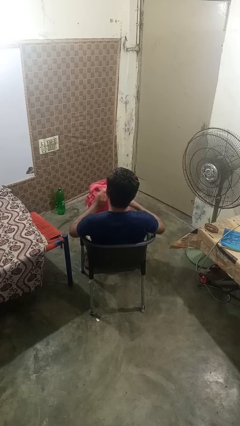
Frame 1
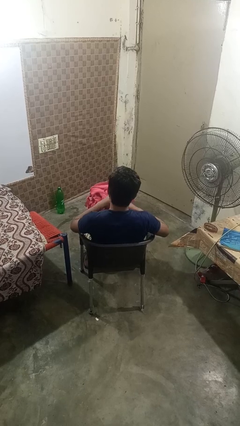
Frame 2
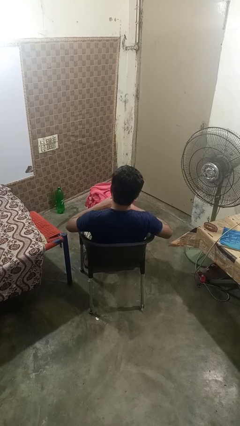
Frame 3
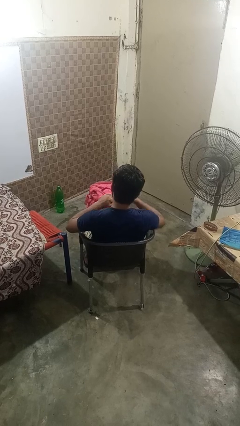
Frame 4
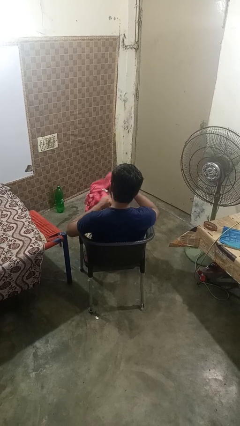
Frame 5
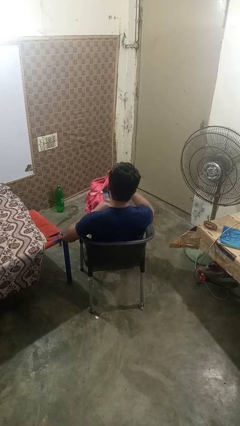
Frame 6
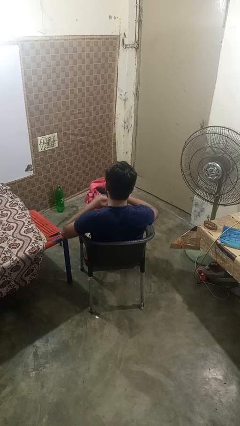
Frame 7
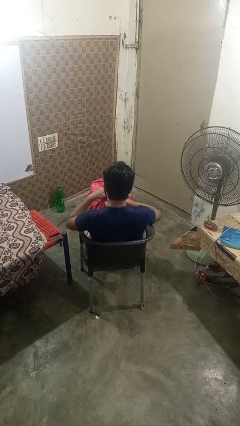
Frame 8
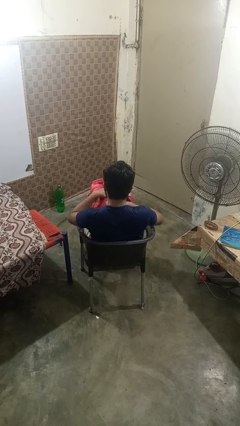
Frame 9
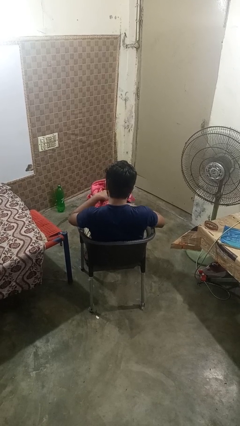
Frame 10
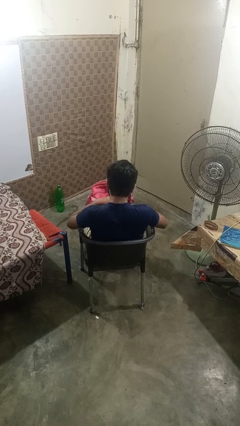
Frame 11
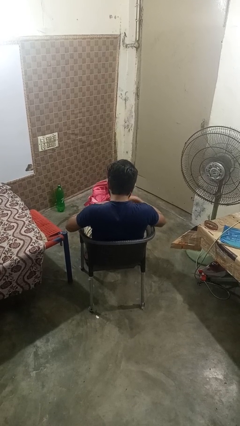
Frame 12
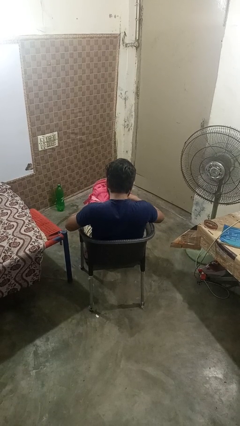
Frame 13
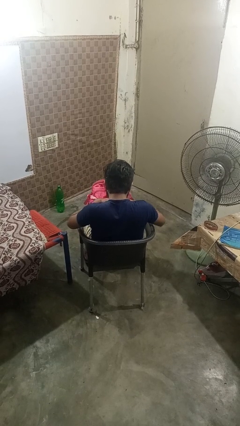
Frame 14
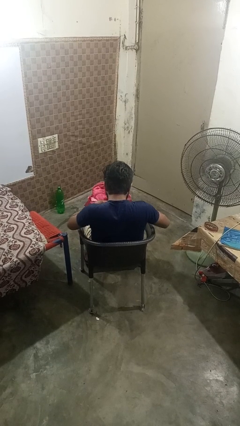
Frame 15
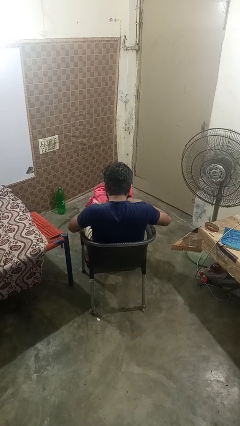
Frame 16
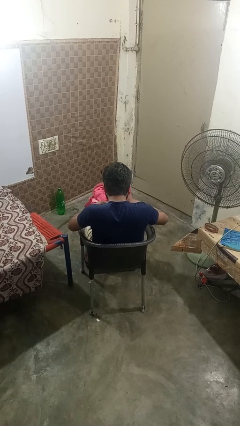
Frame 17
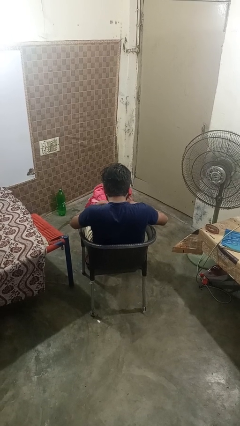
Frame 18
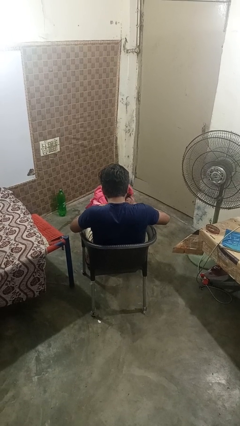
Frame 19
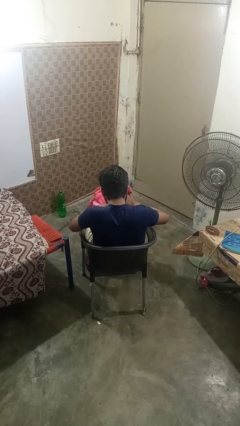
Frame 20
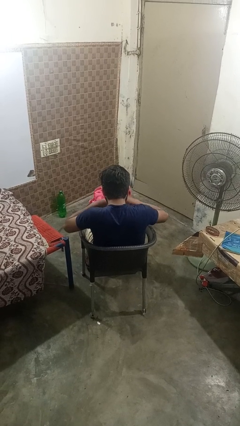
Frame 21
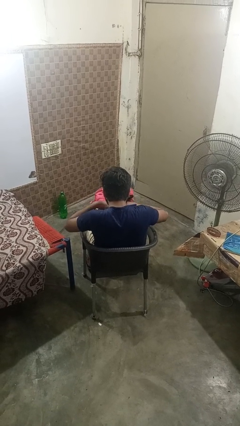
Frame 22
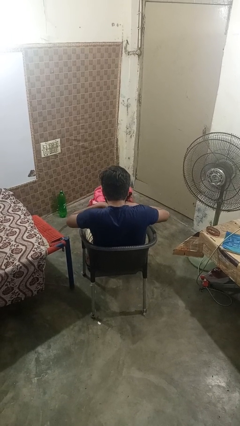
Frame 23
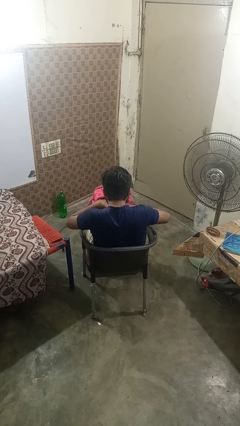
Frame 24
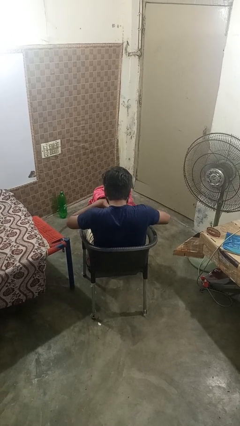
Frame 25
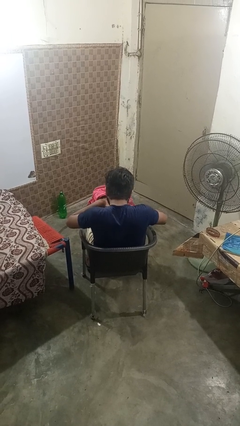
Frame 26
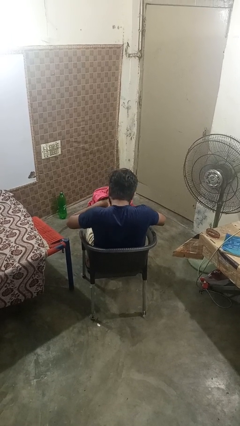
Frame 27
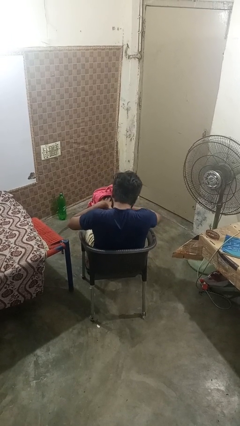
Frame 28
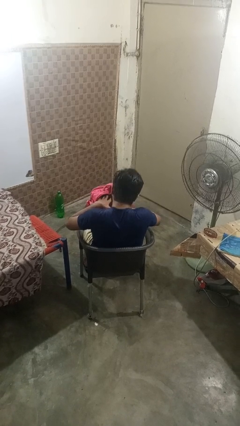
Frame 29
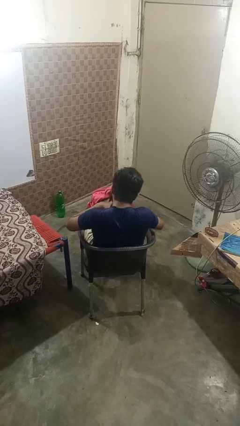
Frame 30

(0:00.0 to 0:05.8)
person searches in backpack

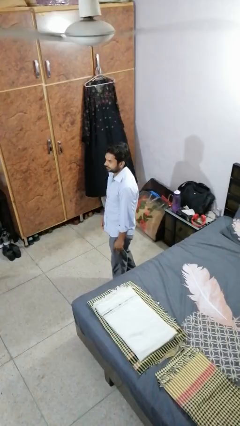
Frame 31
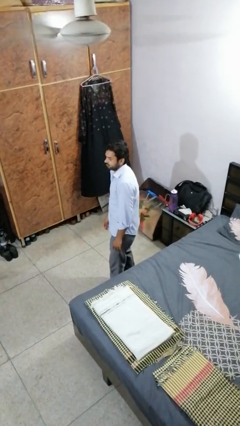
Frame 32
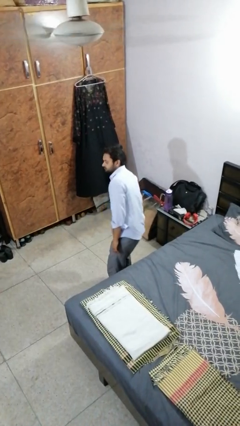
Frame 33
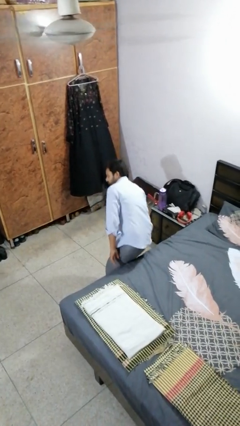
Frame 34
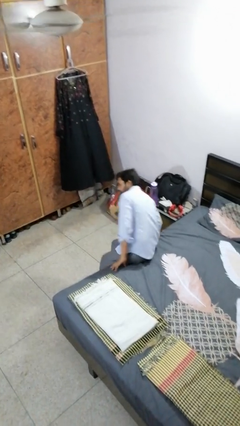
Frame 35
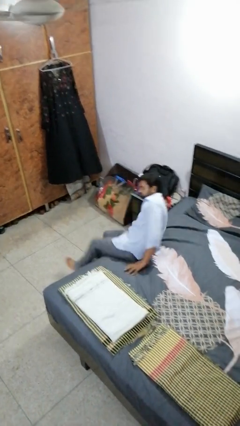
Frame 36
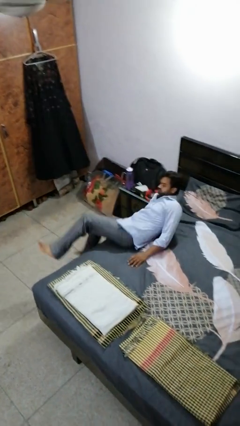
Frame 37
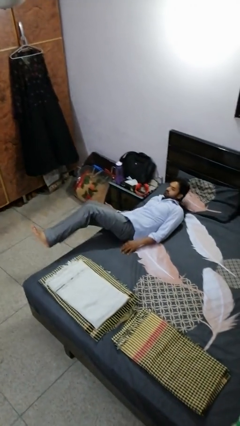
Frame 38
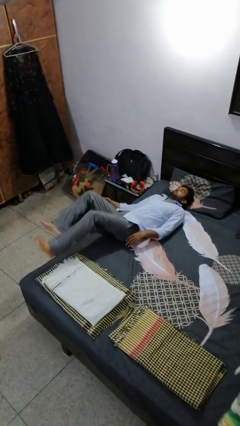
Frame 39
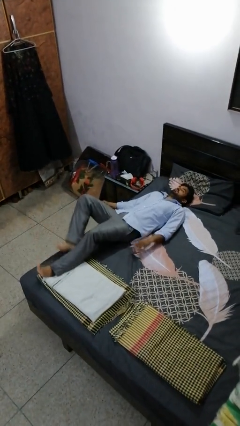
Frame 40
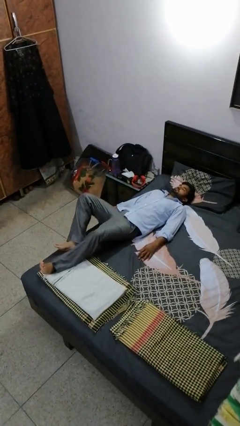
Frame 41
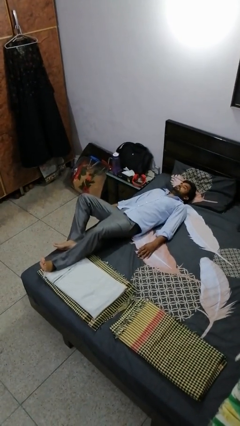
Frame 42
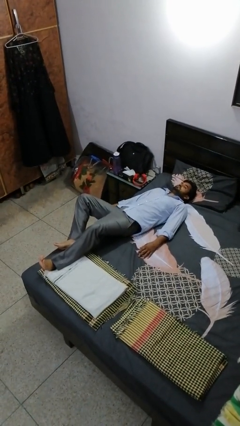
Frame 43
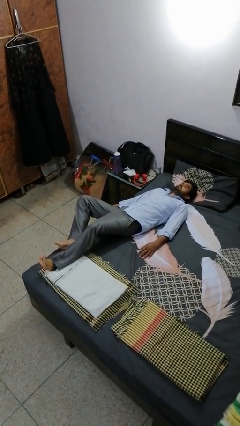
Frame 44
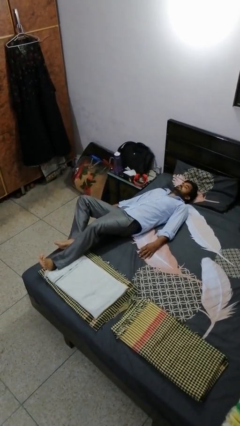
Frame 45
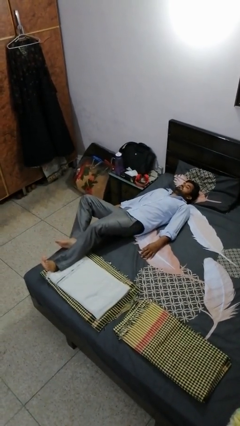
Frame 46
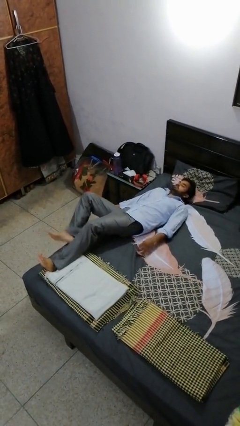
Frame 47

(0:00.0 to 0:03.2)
person lies down on bed

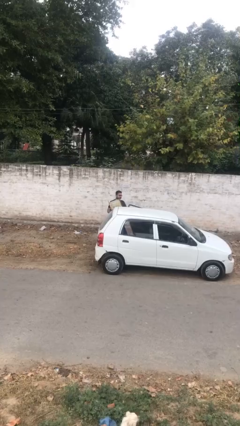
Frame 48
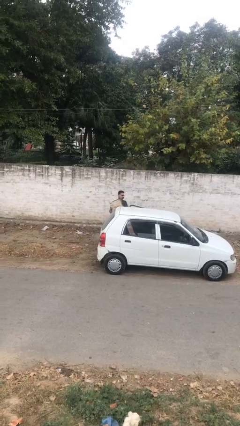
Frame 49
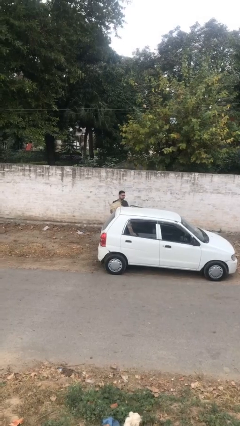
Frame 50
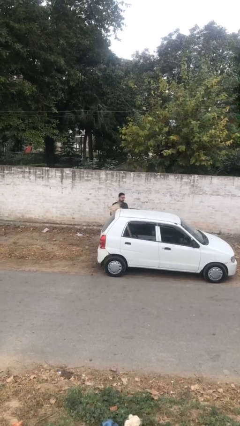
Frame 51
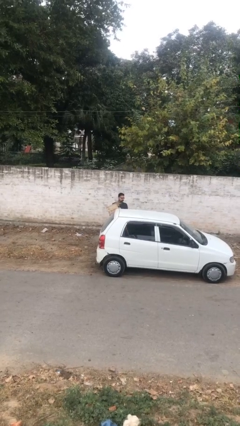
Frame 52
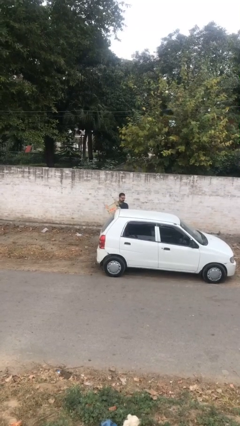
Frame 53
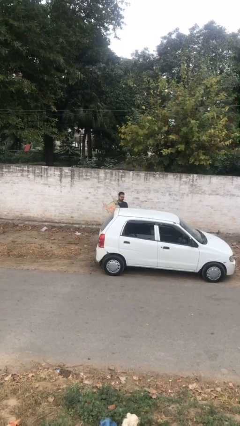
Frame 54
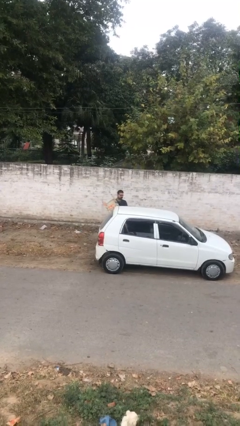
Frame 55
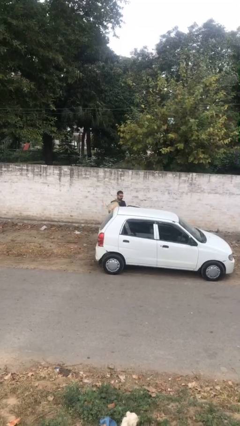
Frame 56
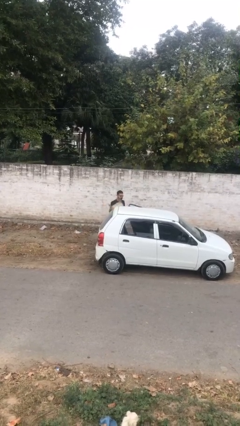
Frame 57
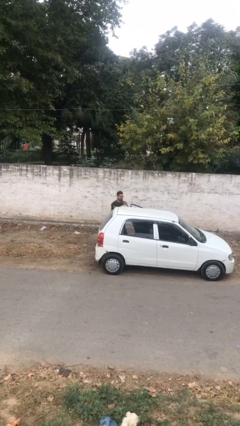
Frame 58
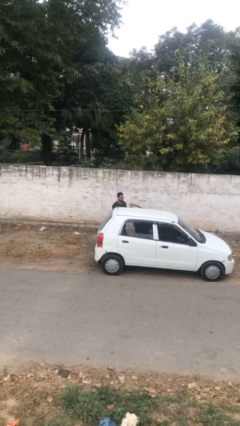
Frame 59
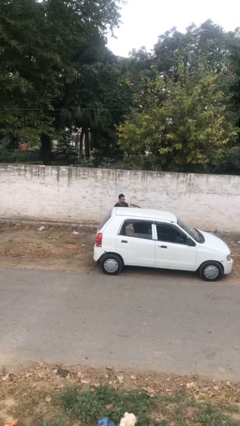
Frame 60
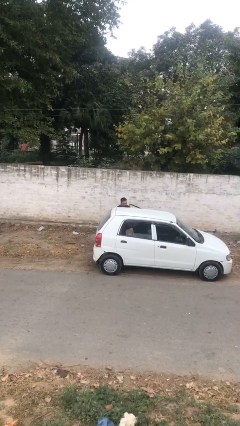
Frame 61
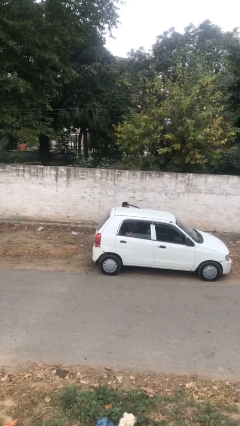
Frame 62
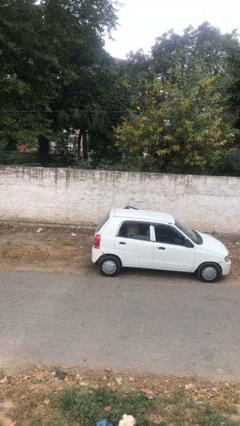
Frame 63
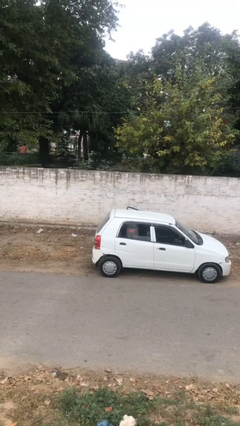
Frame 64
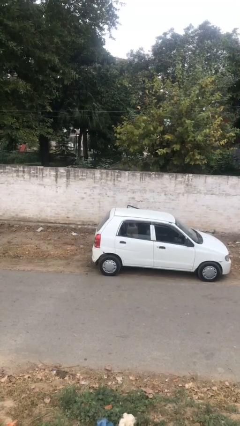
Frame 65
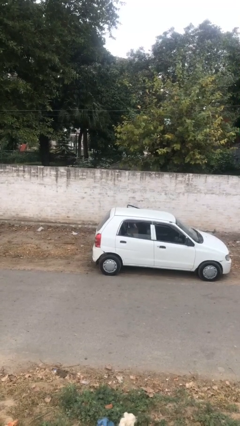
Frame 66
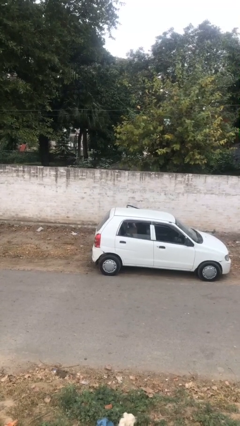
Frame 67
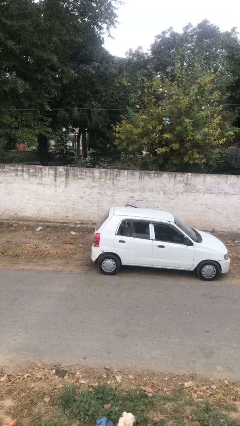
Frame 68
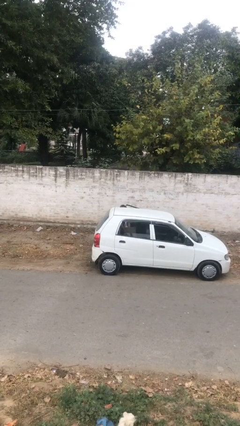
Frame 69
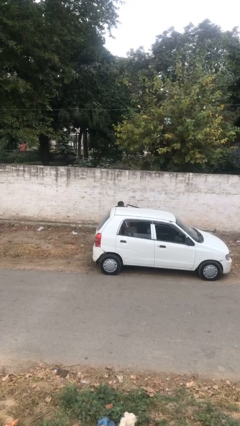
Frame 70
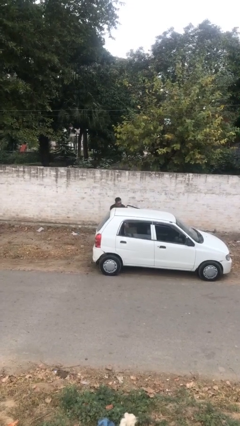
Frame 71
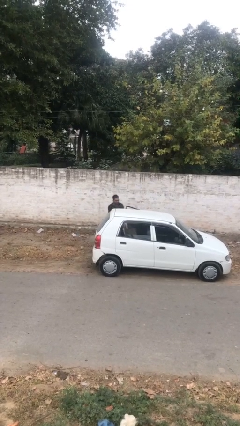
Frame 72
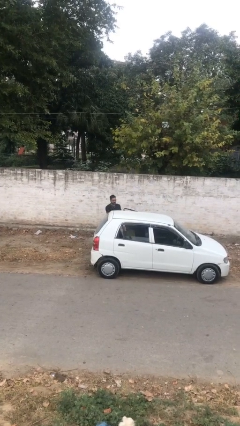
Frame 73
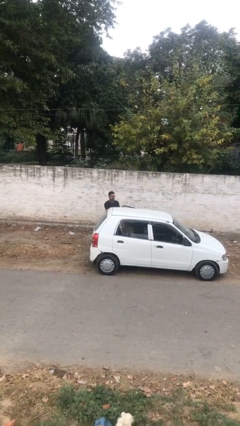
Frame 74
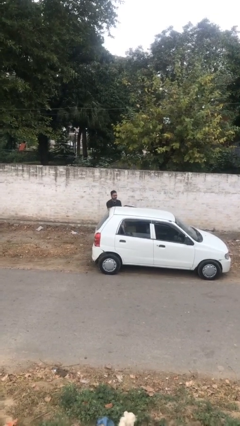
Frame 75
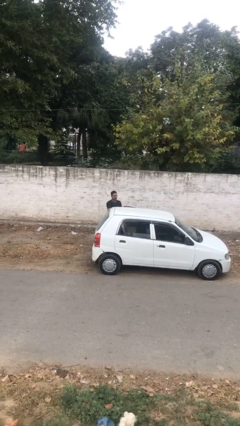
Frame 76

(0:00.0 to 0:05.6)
person loads car

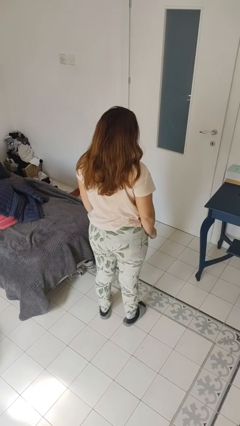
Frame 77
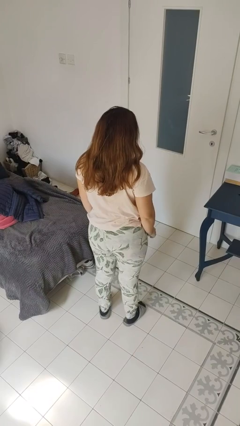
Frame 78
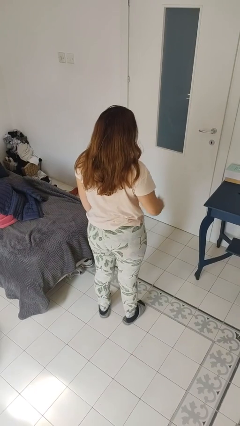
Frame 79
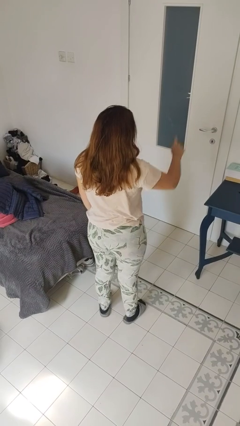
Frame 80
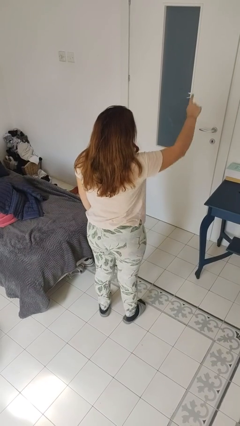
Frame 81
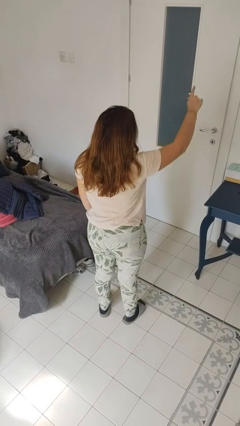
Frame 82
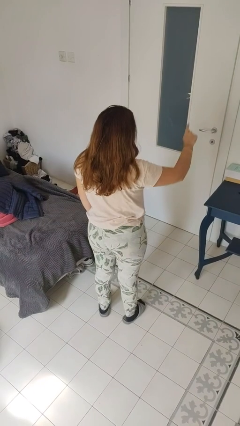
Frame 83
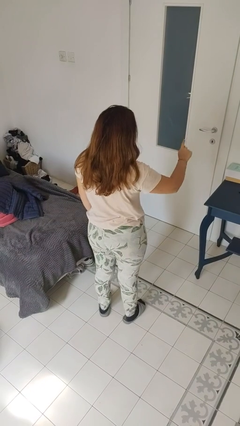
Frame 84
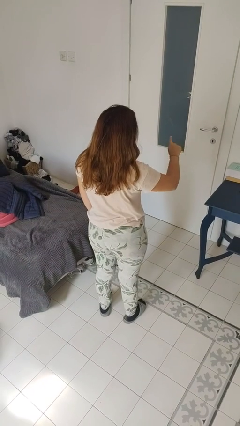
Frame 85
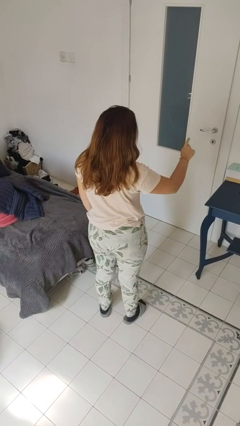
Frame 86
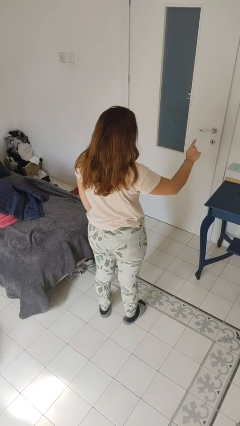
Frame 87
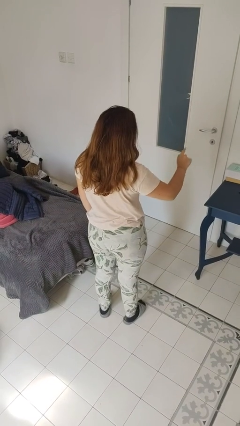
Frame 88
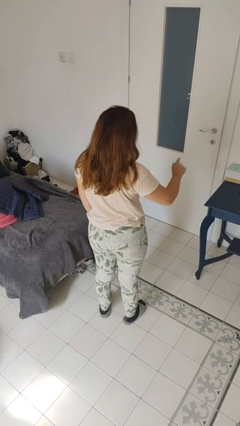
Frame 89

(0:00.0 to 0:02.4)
person gestures number one

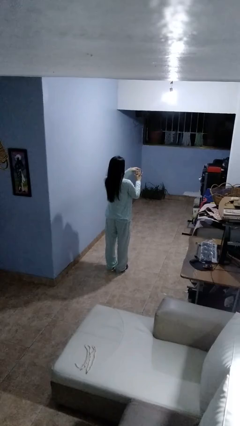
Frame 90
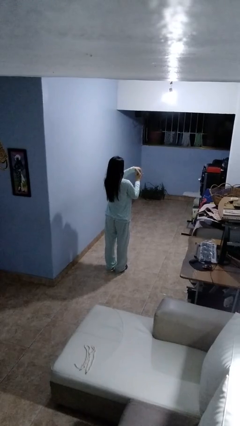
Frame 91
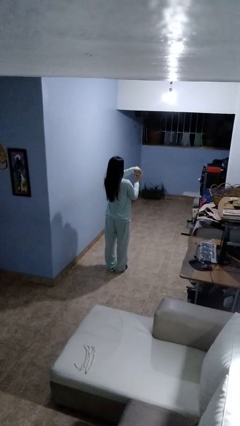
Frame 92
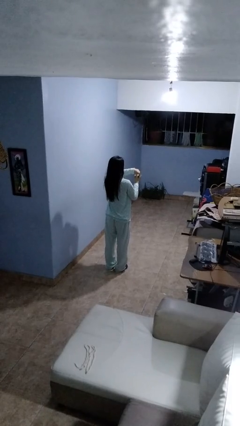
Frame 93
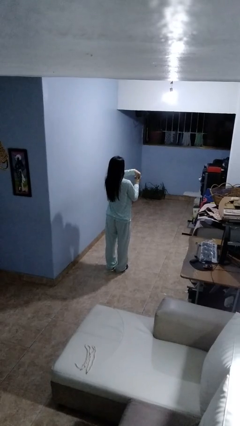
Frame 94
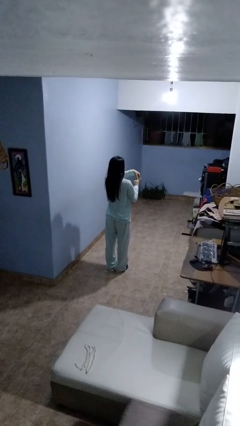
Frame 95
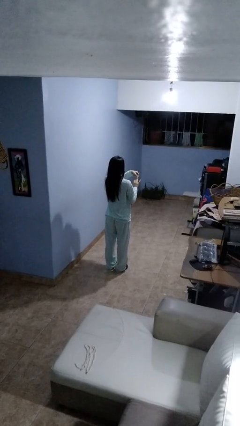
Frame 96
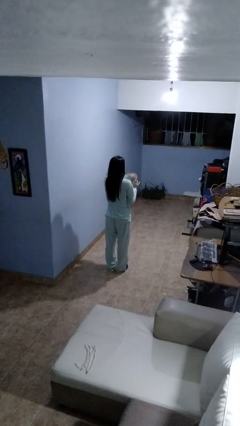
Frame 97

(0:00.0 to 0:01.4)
person takes off ring
